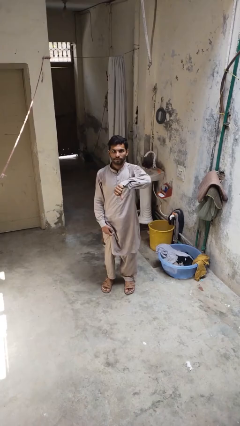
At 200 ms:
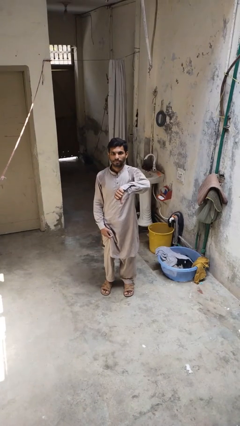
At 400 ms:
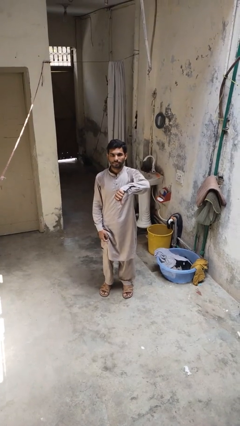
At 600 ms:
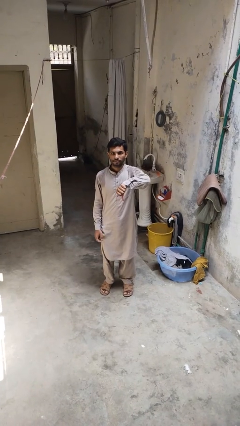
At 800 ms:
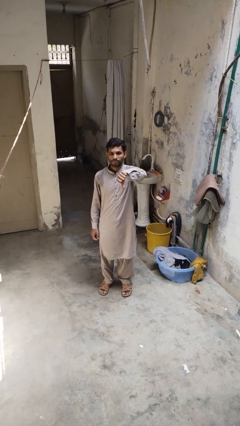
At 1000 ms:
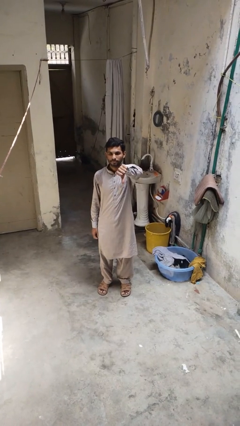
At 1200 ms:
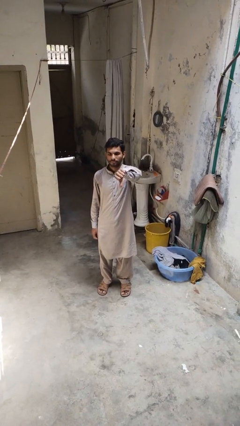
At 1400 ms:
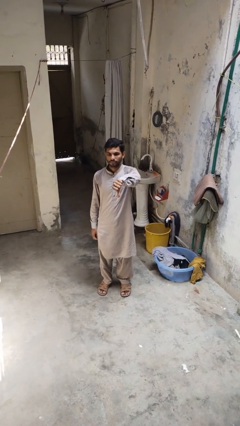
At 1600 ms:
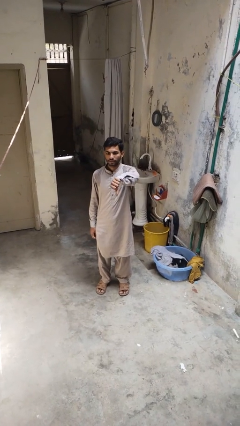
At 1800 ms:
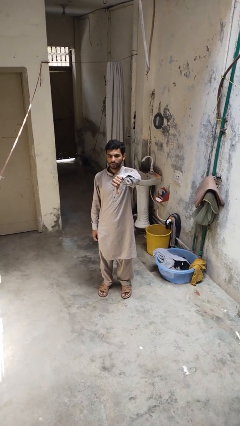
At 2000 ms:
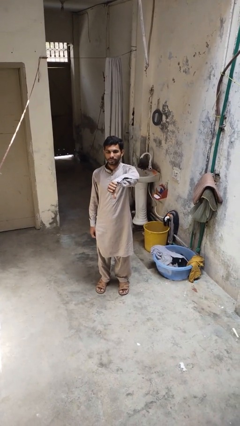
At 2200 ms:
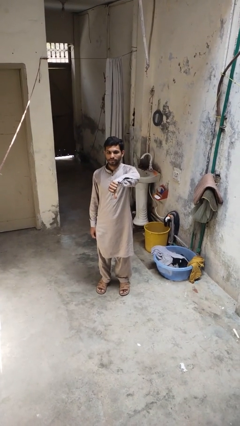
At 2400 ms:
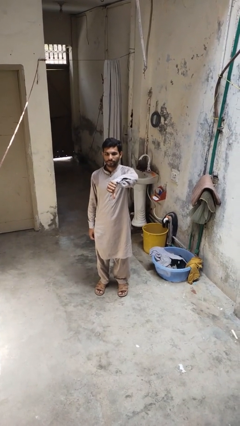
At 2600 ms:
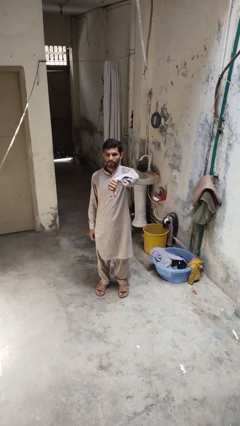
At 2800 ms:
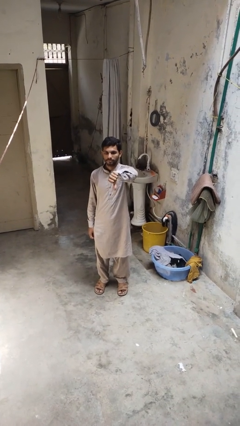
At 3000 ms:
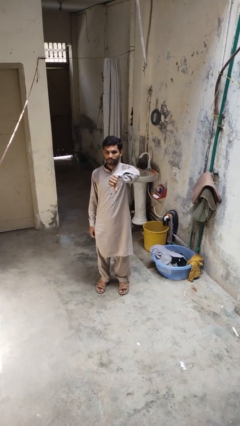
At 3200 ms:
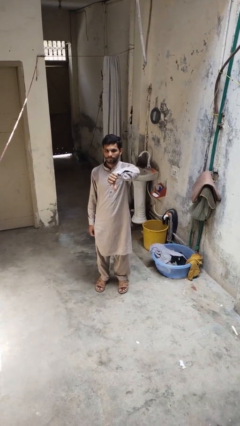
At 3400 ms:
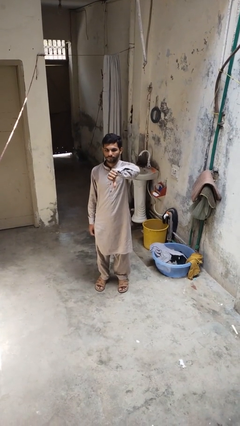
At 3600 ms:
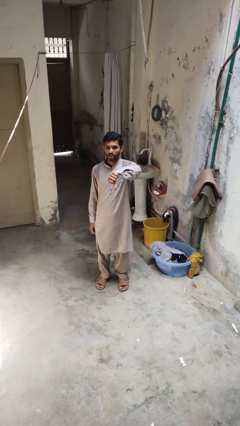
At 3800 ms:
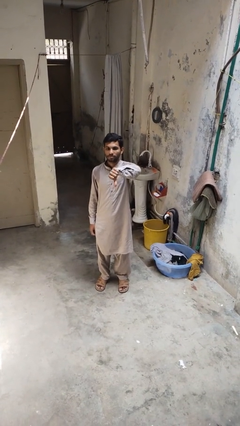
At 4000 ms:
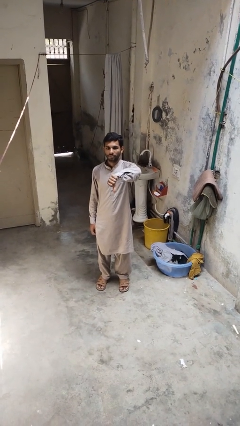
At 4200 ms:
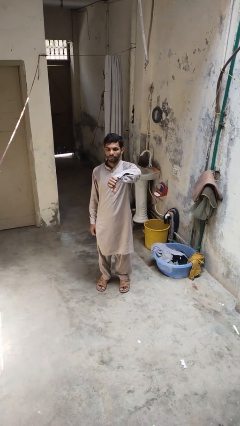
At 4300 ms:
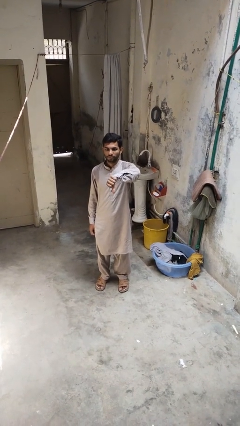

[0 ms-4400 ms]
person gestures thumbs down

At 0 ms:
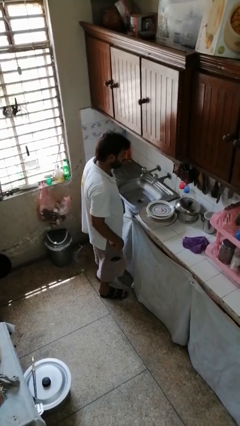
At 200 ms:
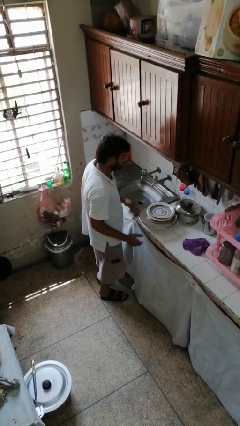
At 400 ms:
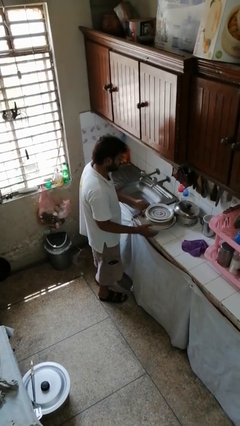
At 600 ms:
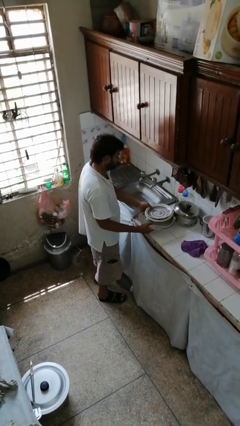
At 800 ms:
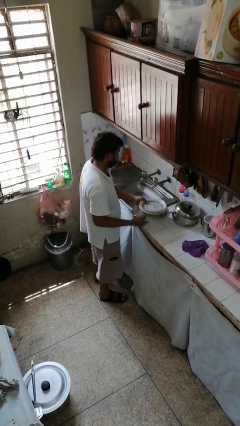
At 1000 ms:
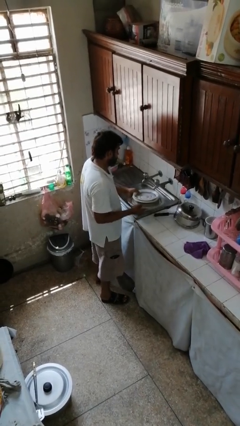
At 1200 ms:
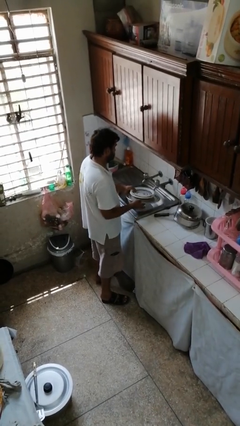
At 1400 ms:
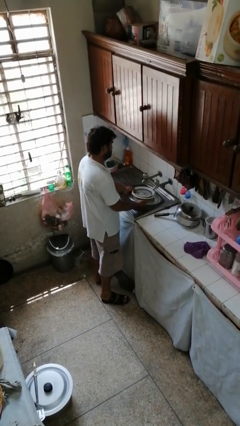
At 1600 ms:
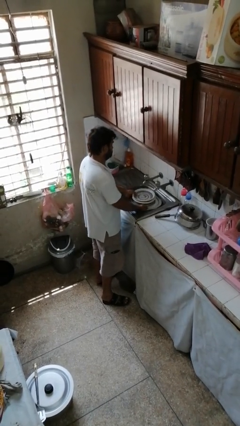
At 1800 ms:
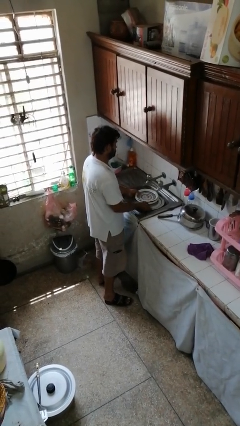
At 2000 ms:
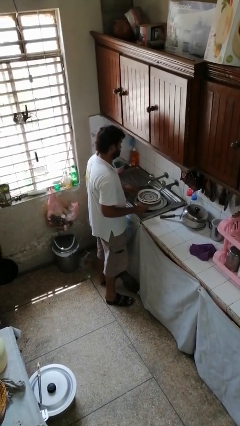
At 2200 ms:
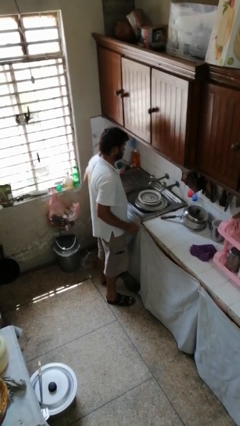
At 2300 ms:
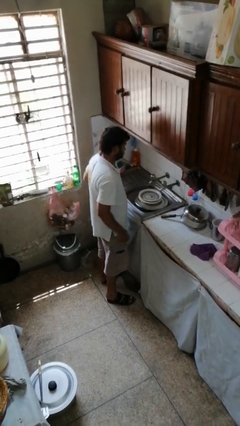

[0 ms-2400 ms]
person loads dishwasher

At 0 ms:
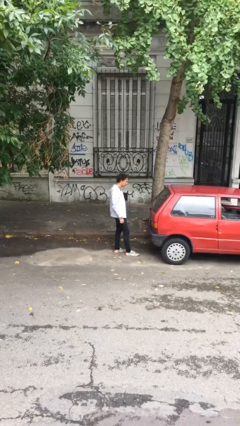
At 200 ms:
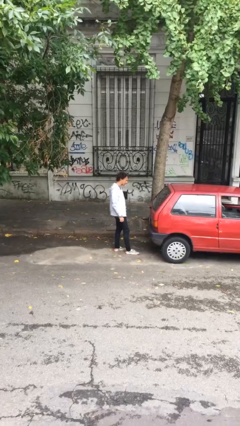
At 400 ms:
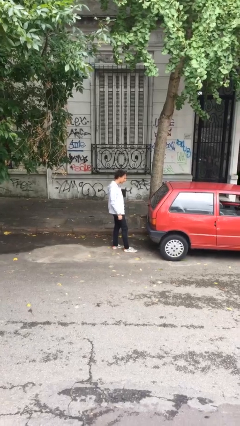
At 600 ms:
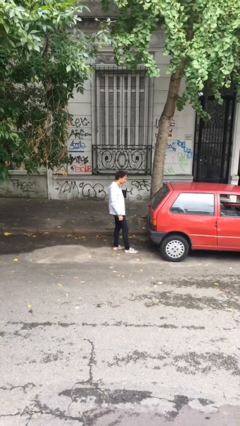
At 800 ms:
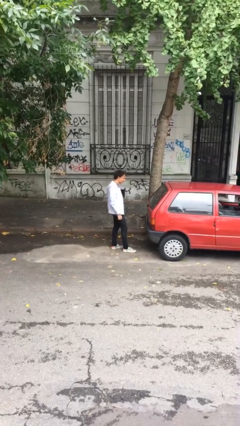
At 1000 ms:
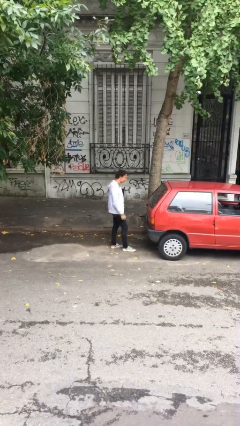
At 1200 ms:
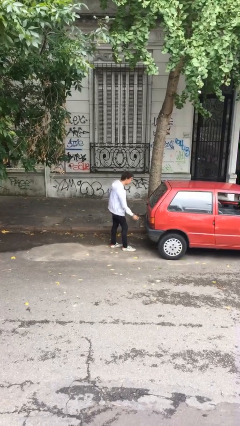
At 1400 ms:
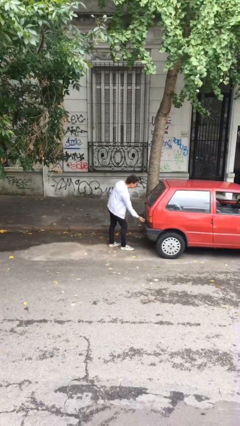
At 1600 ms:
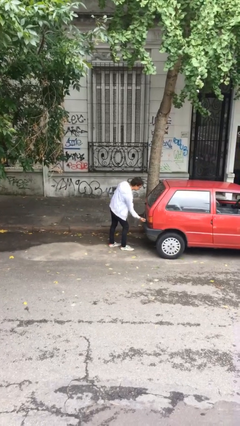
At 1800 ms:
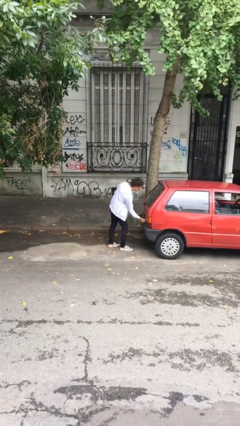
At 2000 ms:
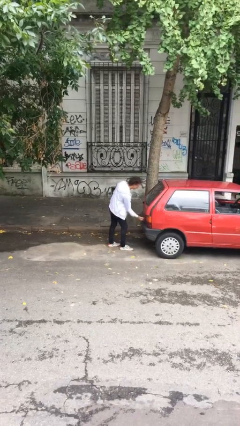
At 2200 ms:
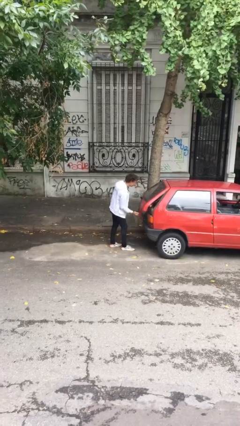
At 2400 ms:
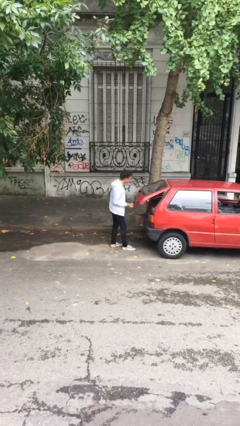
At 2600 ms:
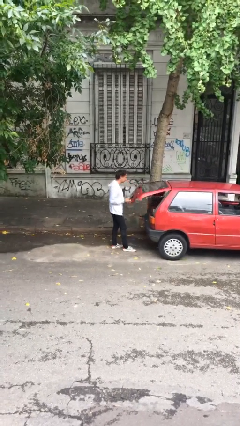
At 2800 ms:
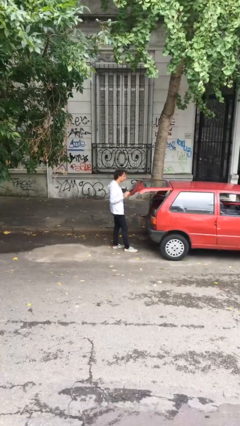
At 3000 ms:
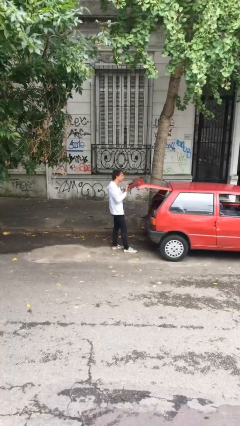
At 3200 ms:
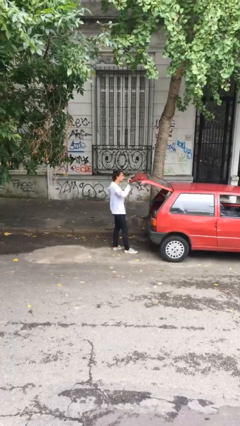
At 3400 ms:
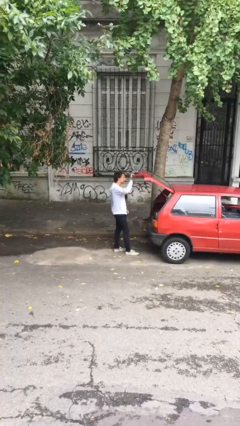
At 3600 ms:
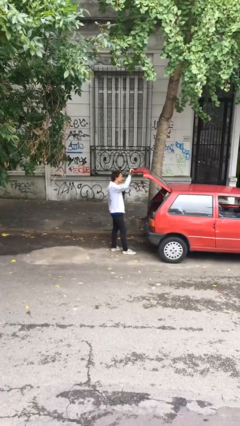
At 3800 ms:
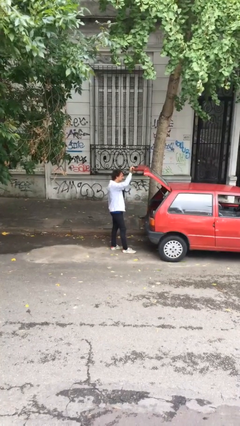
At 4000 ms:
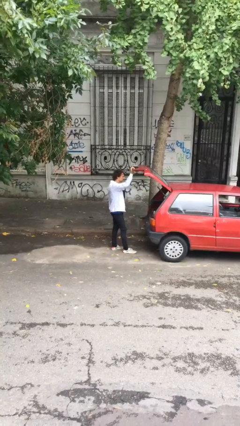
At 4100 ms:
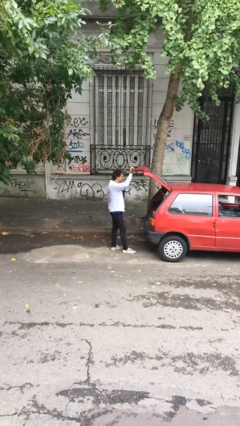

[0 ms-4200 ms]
person opens car trunk

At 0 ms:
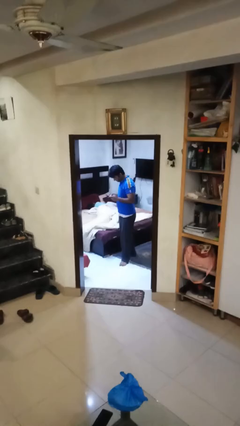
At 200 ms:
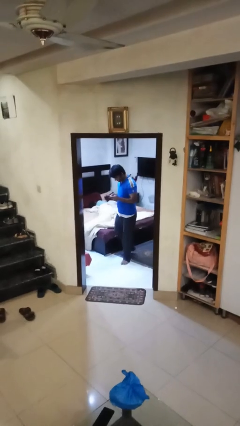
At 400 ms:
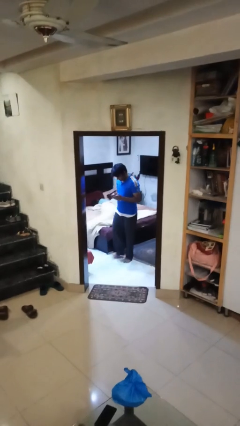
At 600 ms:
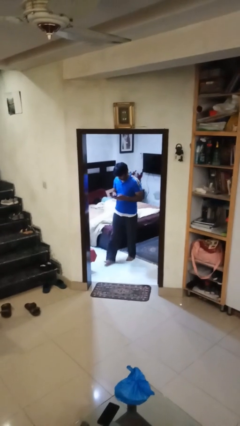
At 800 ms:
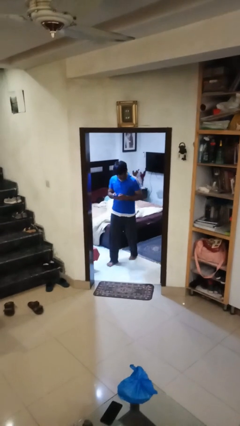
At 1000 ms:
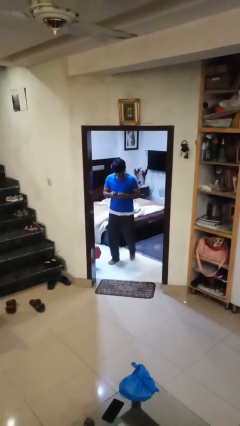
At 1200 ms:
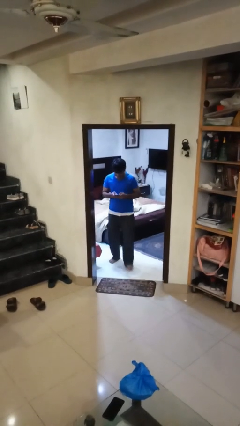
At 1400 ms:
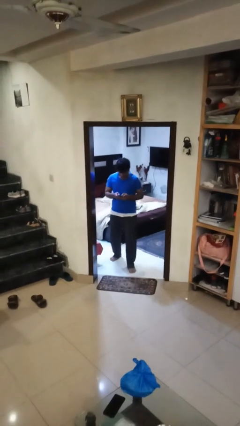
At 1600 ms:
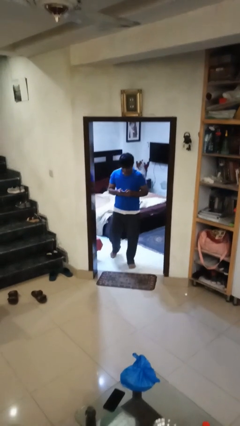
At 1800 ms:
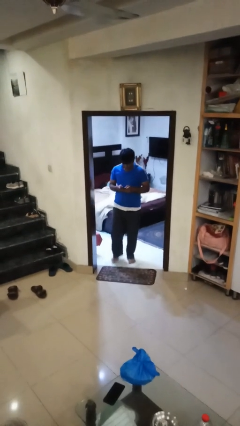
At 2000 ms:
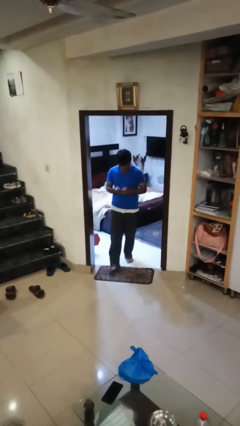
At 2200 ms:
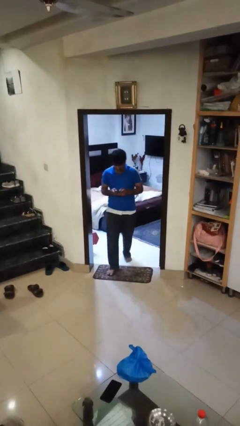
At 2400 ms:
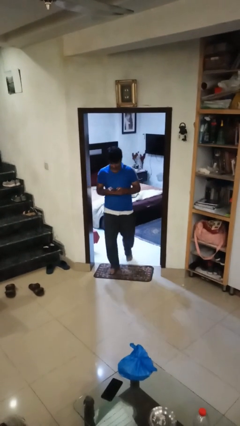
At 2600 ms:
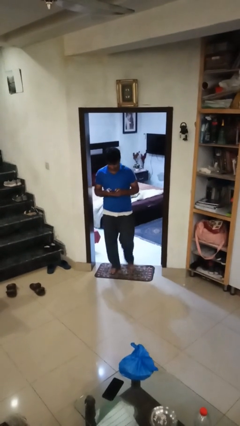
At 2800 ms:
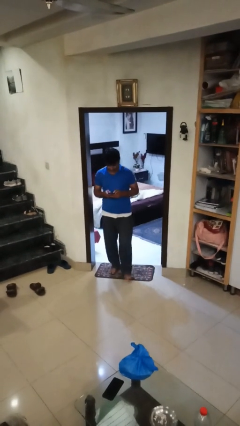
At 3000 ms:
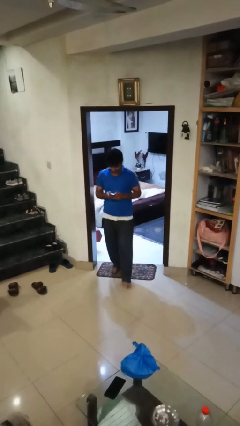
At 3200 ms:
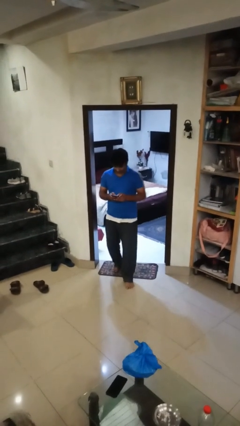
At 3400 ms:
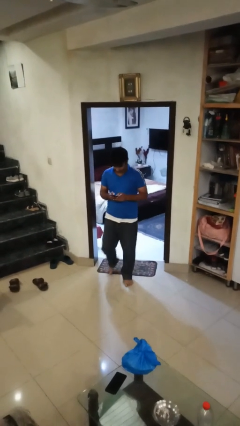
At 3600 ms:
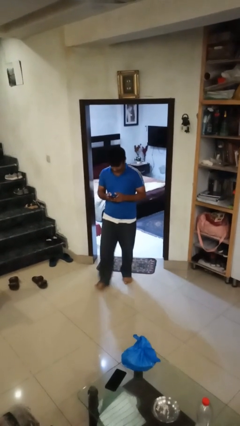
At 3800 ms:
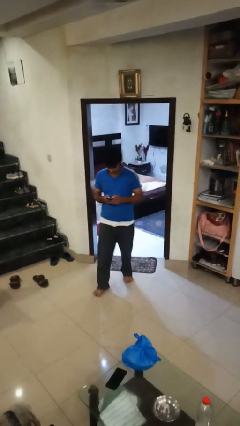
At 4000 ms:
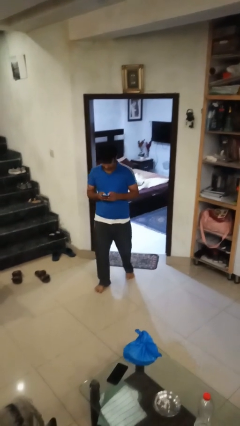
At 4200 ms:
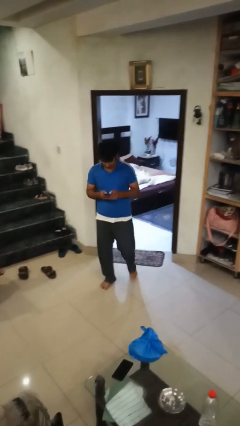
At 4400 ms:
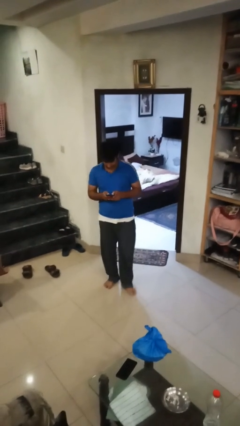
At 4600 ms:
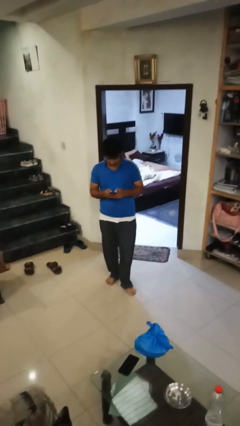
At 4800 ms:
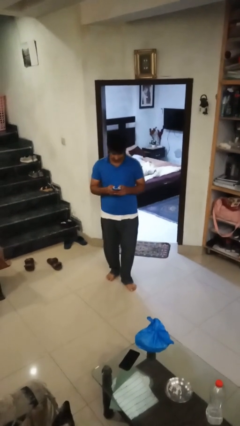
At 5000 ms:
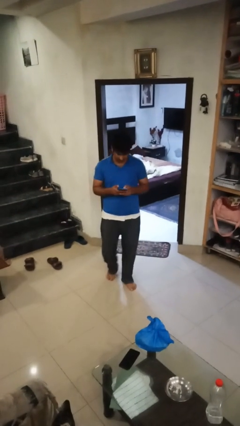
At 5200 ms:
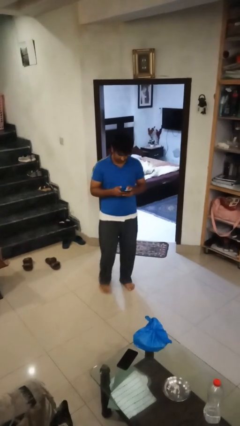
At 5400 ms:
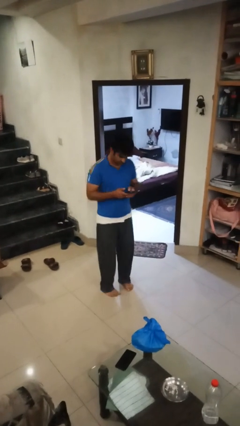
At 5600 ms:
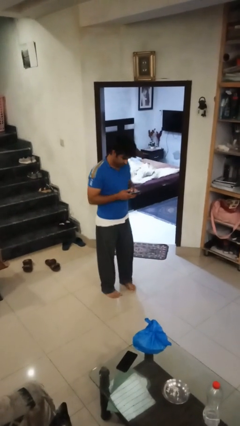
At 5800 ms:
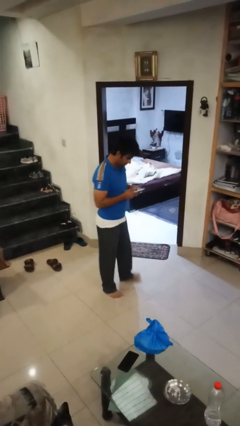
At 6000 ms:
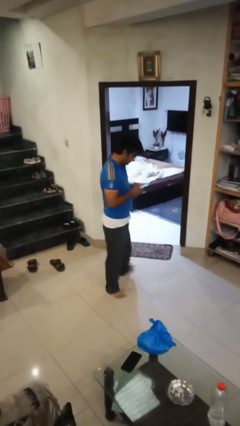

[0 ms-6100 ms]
person enters scene through structure

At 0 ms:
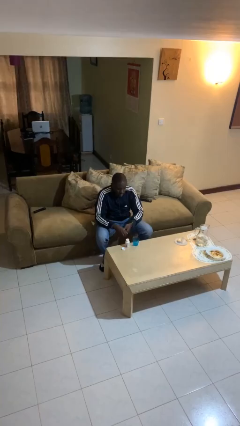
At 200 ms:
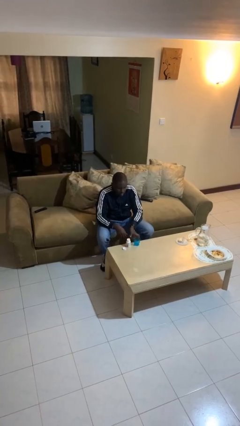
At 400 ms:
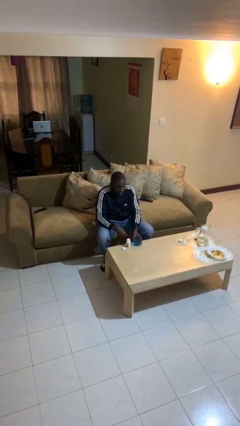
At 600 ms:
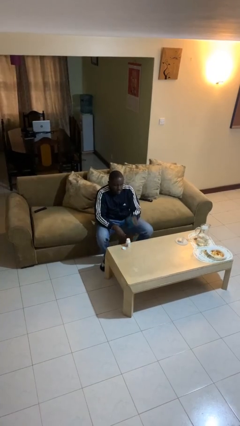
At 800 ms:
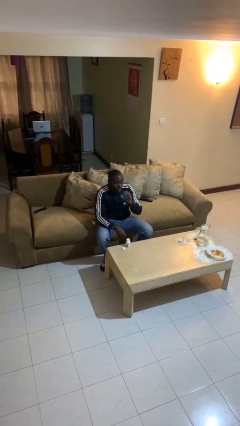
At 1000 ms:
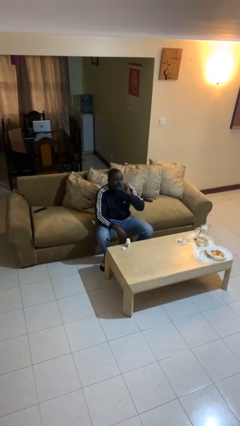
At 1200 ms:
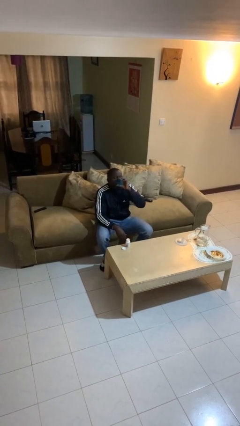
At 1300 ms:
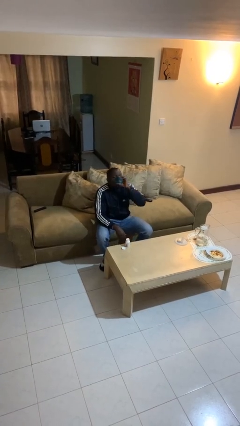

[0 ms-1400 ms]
person drinks from cup
